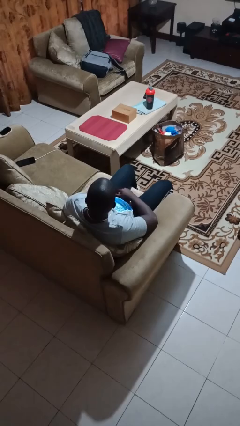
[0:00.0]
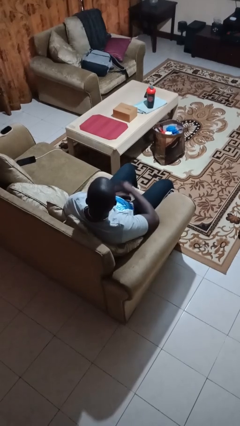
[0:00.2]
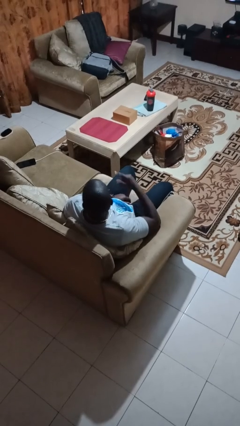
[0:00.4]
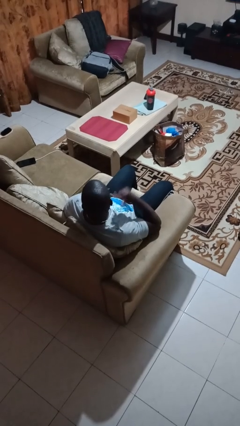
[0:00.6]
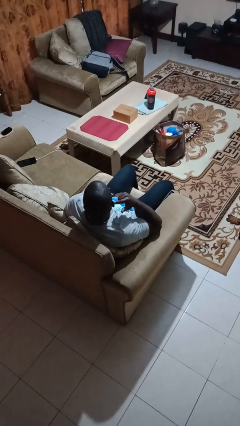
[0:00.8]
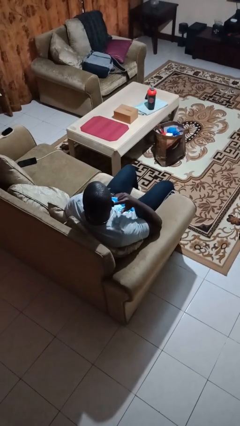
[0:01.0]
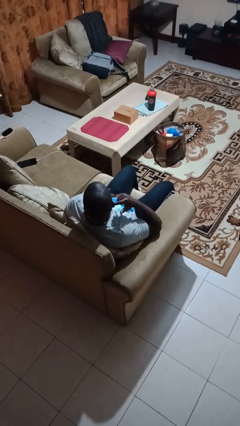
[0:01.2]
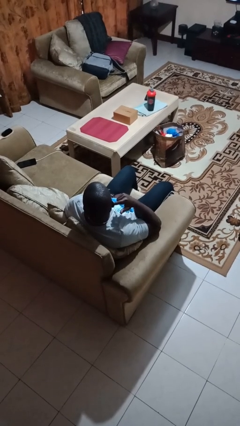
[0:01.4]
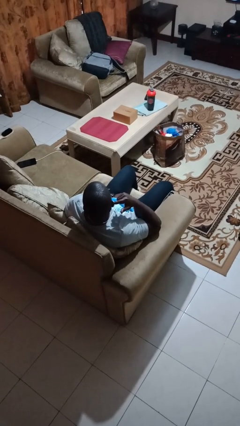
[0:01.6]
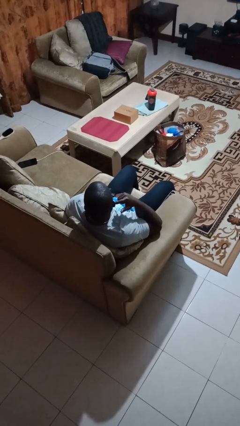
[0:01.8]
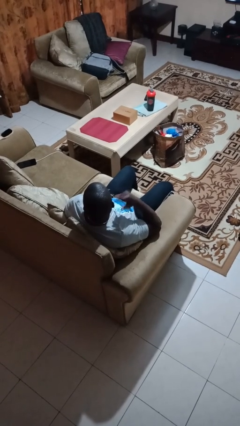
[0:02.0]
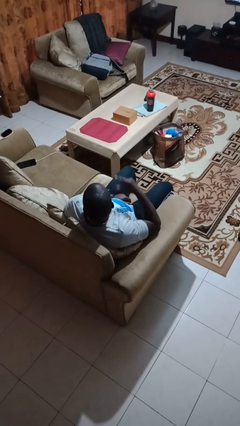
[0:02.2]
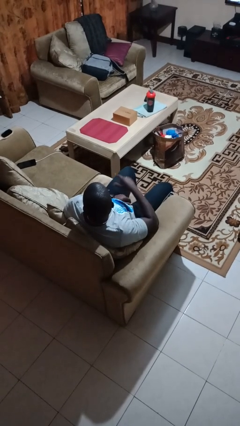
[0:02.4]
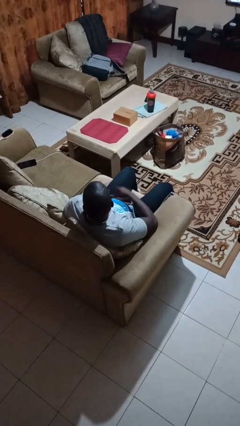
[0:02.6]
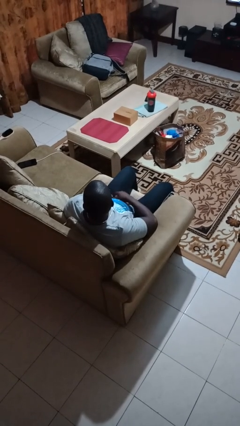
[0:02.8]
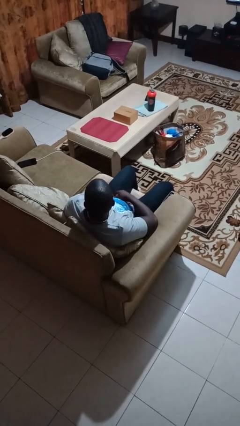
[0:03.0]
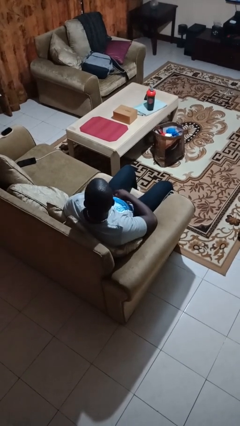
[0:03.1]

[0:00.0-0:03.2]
person gestures listen closely

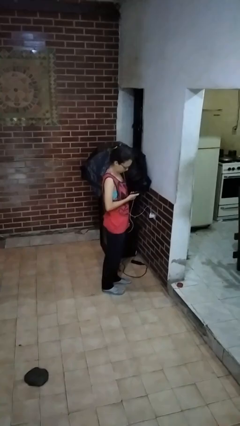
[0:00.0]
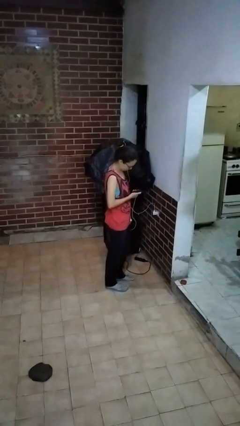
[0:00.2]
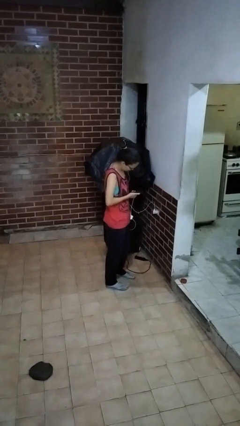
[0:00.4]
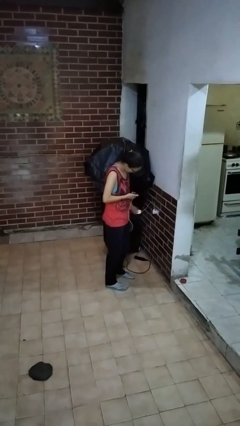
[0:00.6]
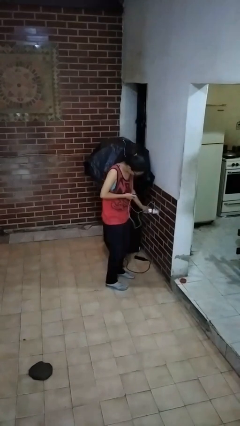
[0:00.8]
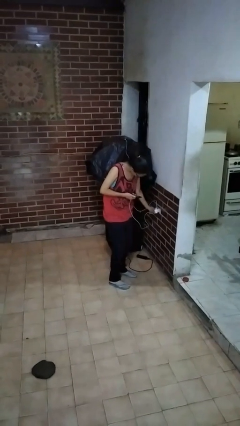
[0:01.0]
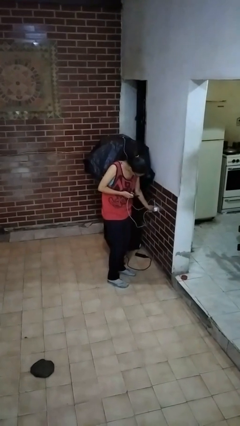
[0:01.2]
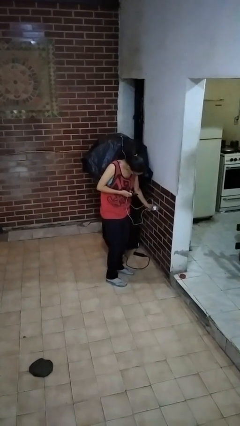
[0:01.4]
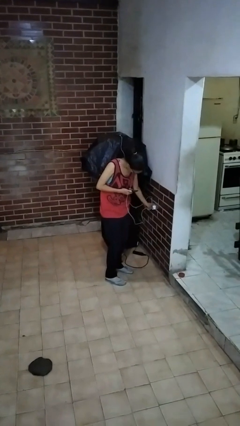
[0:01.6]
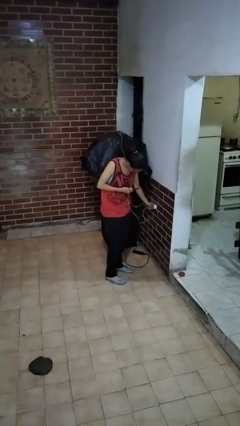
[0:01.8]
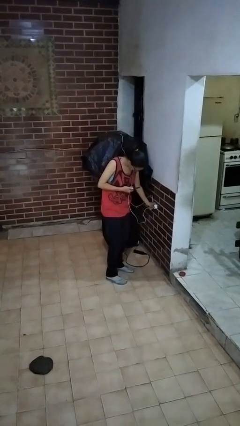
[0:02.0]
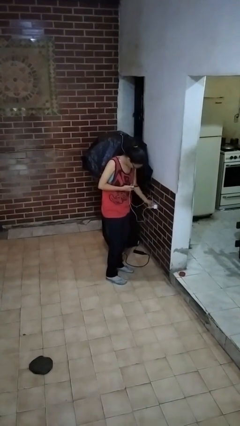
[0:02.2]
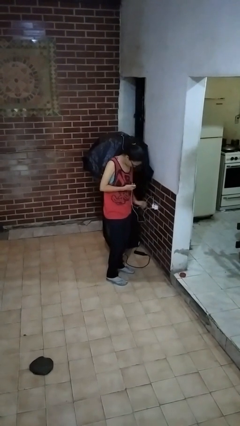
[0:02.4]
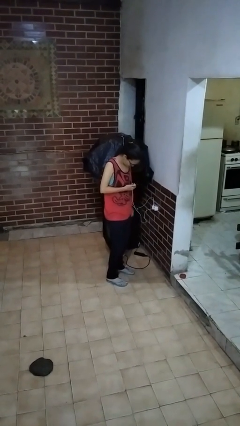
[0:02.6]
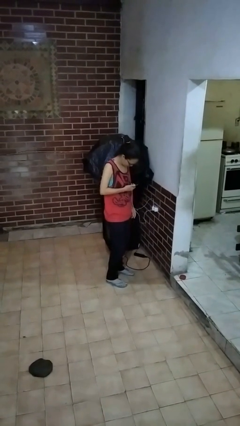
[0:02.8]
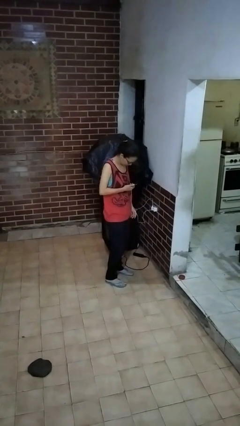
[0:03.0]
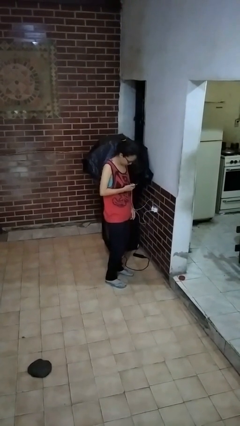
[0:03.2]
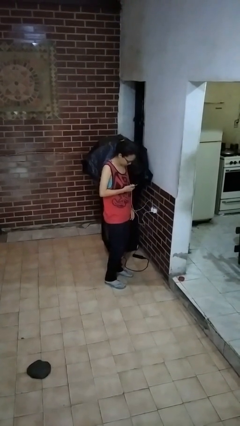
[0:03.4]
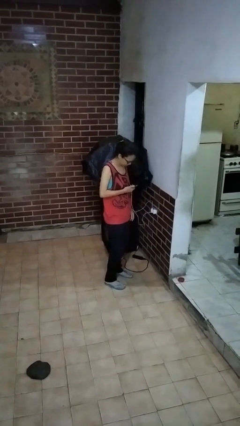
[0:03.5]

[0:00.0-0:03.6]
person plugs into electrical socket

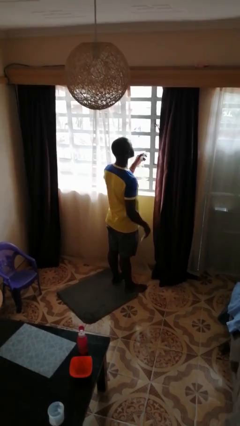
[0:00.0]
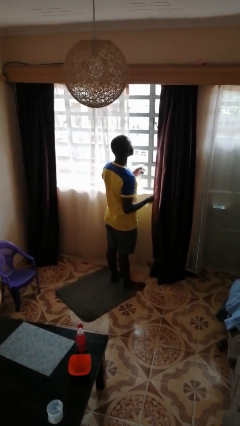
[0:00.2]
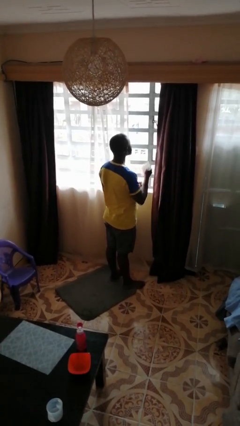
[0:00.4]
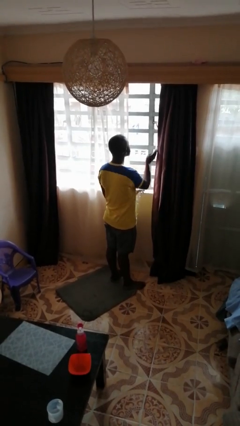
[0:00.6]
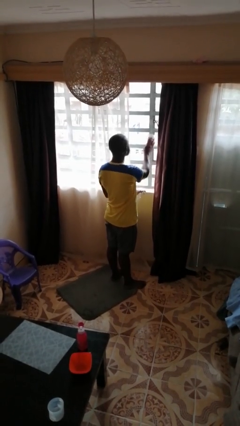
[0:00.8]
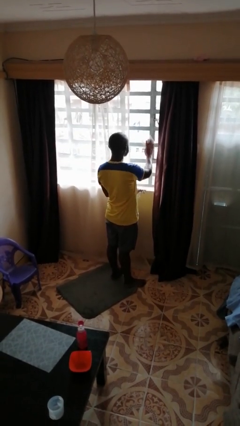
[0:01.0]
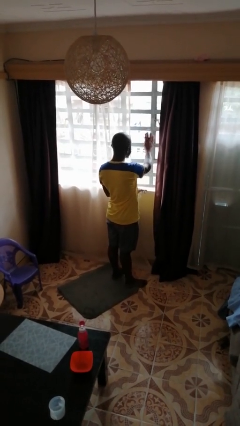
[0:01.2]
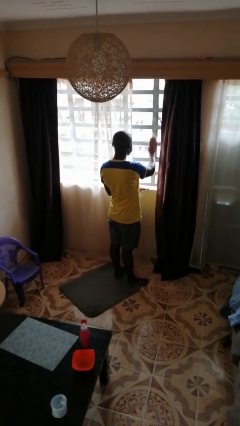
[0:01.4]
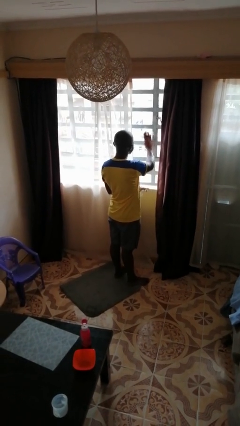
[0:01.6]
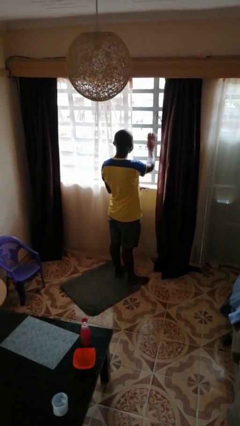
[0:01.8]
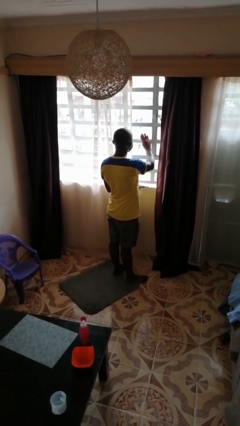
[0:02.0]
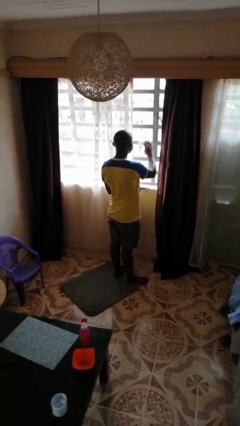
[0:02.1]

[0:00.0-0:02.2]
person washes window

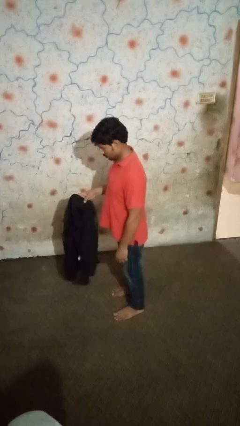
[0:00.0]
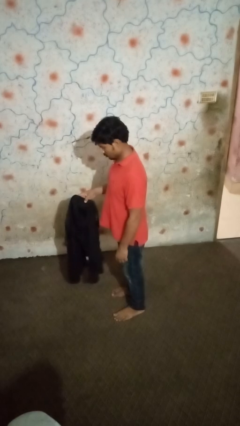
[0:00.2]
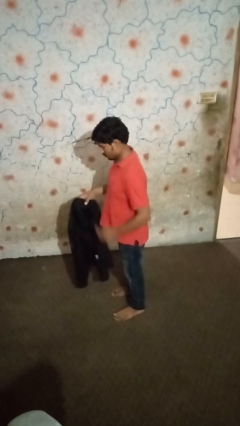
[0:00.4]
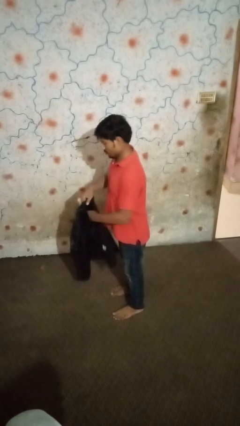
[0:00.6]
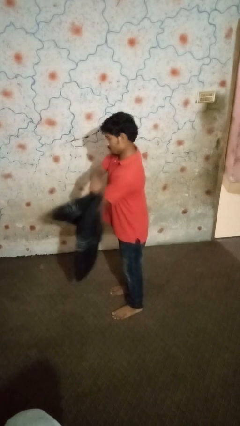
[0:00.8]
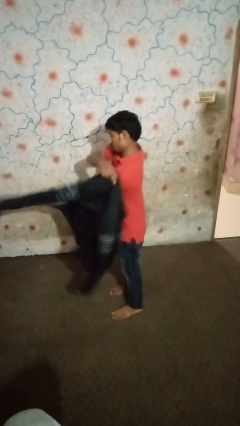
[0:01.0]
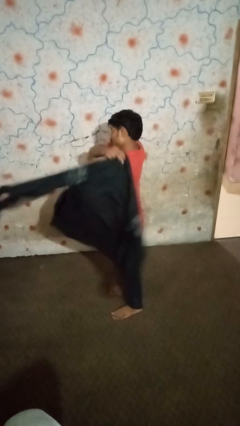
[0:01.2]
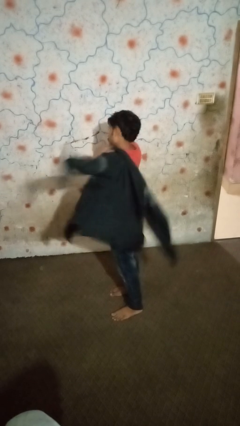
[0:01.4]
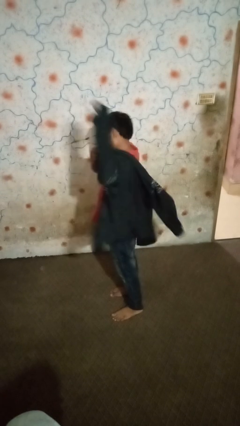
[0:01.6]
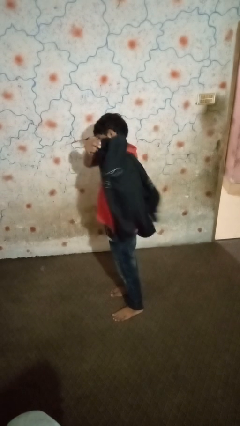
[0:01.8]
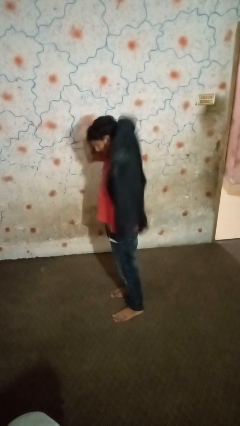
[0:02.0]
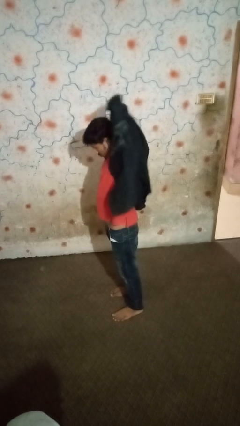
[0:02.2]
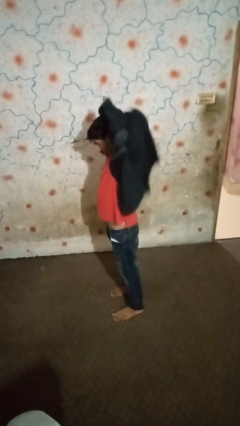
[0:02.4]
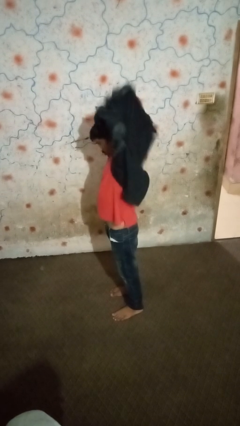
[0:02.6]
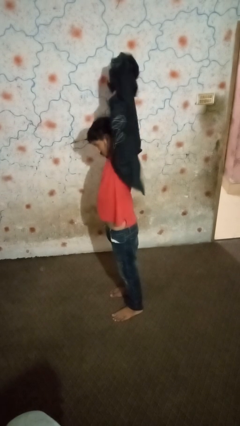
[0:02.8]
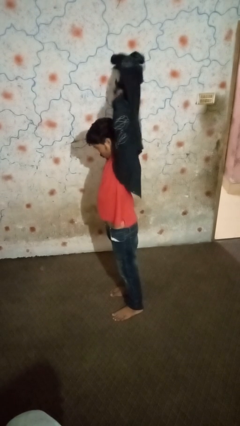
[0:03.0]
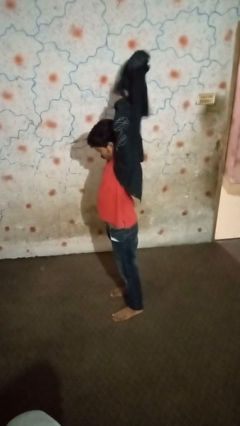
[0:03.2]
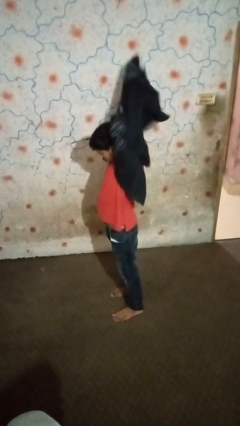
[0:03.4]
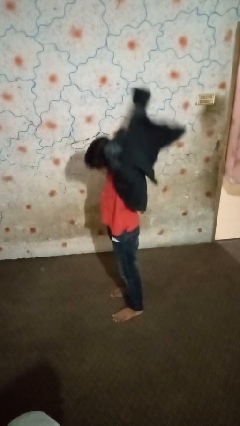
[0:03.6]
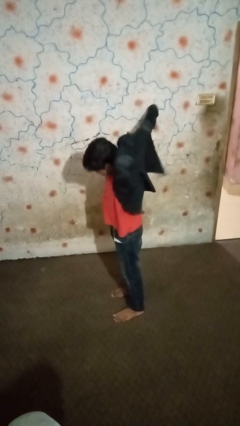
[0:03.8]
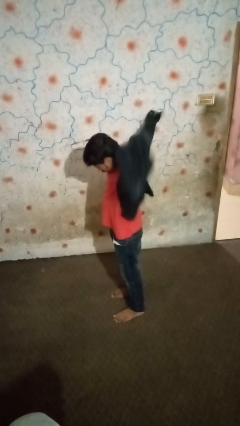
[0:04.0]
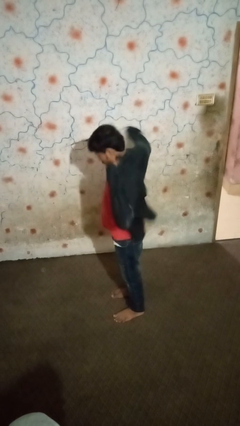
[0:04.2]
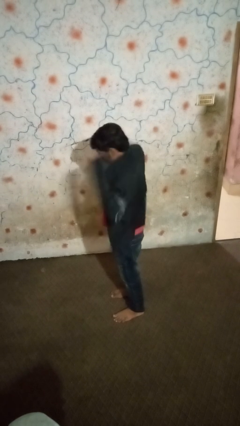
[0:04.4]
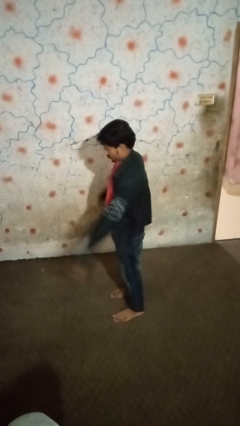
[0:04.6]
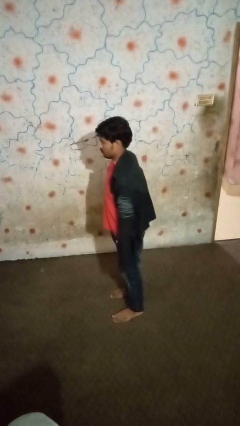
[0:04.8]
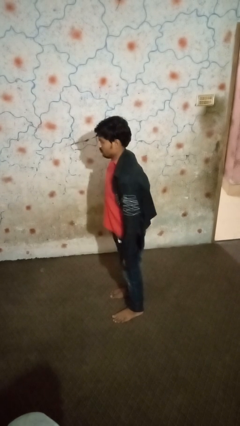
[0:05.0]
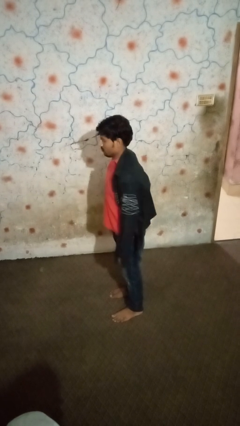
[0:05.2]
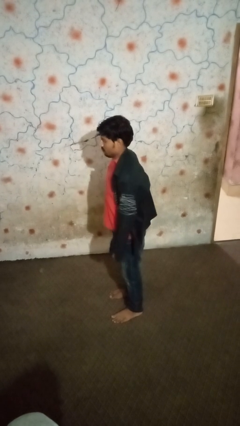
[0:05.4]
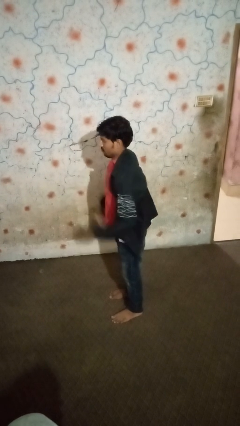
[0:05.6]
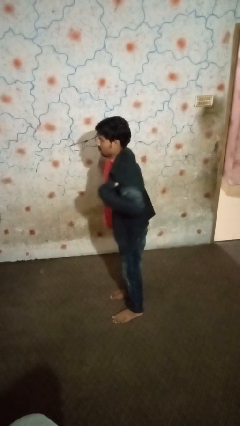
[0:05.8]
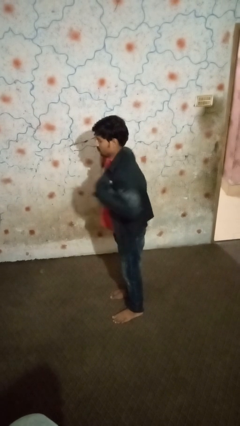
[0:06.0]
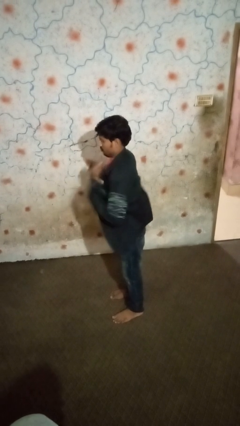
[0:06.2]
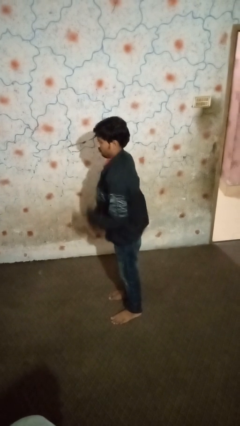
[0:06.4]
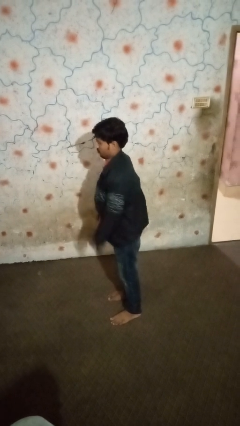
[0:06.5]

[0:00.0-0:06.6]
person puts on shirt

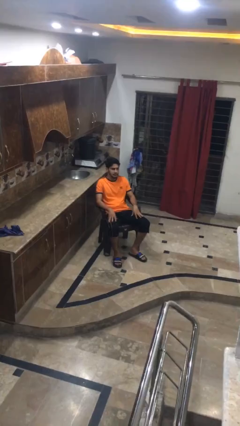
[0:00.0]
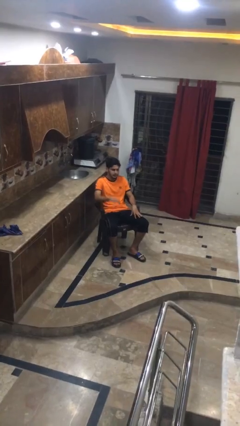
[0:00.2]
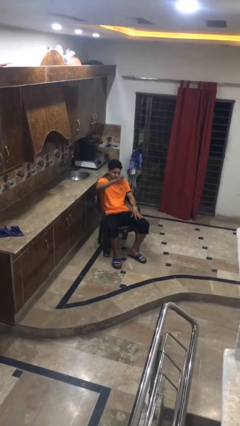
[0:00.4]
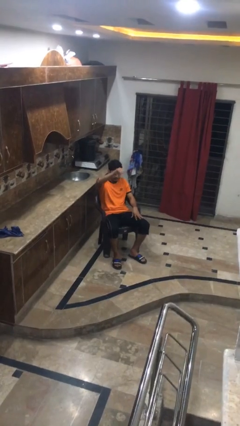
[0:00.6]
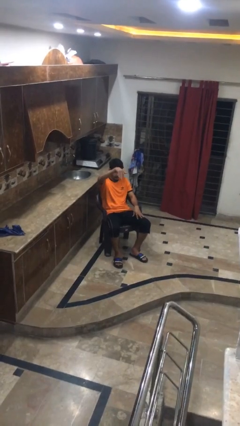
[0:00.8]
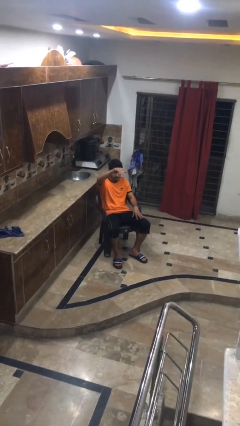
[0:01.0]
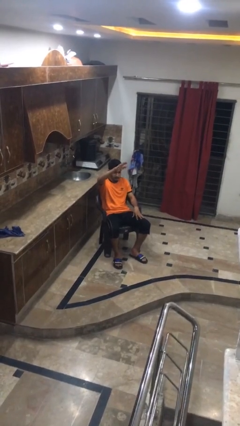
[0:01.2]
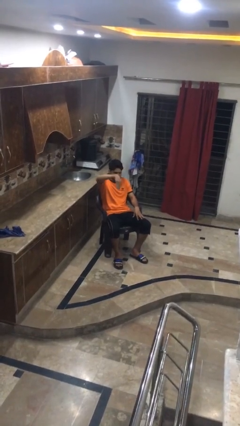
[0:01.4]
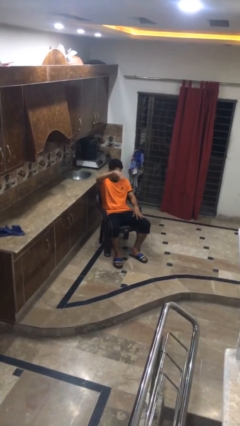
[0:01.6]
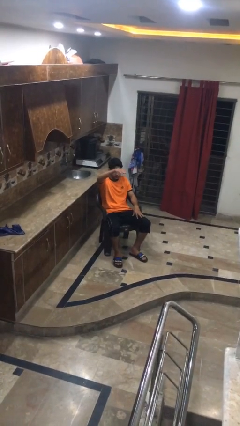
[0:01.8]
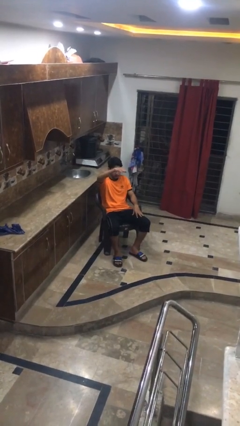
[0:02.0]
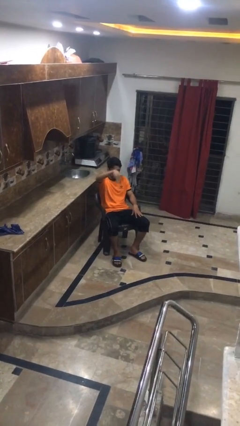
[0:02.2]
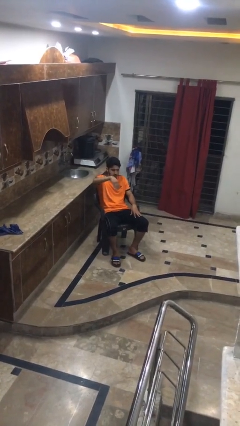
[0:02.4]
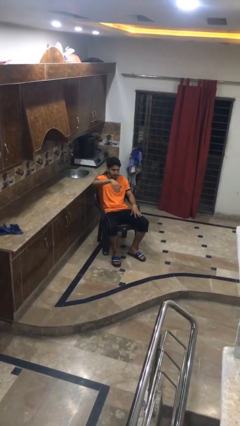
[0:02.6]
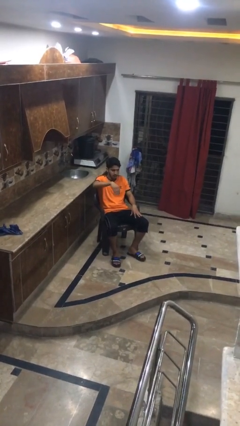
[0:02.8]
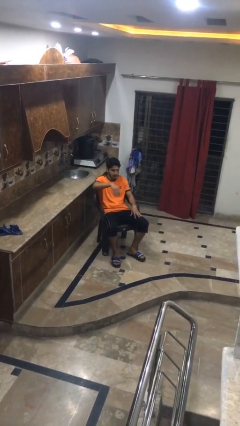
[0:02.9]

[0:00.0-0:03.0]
person gestures come here
